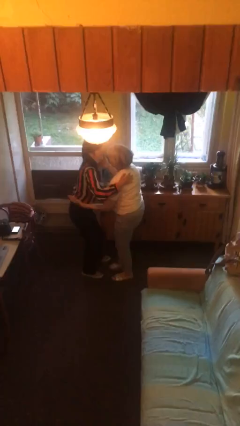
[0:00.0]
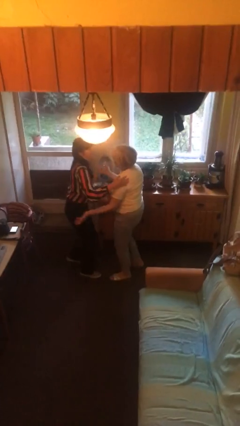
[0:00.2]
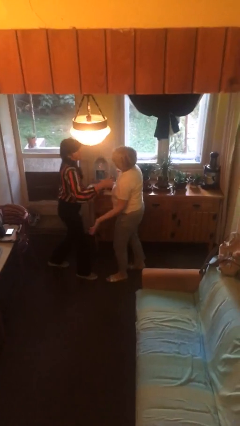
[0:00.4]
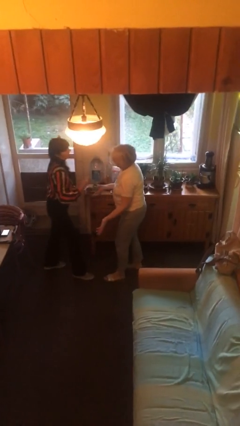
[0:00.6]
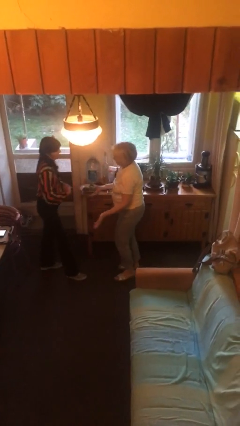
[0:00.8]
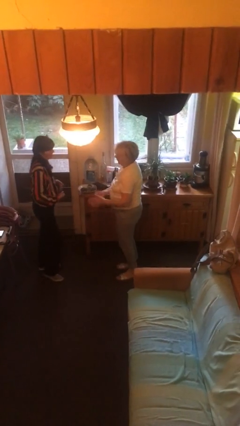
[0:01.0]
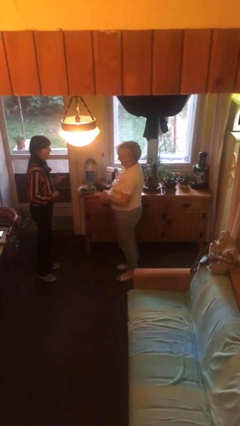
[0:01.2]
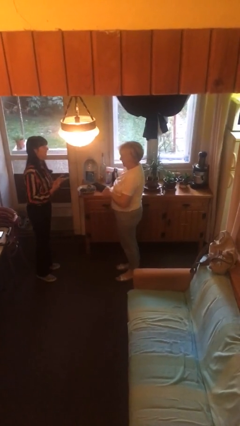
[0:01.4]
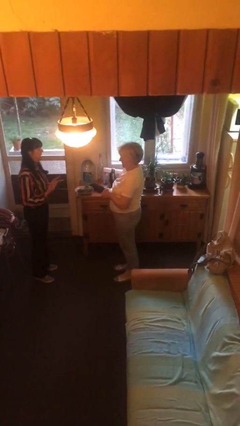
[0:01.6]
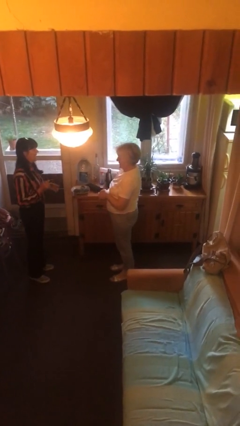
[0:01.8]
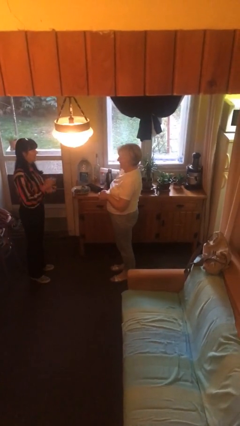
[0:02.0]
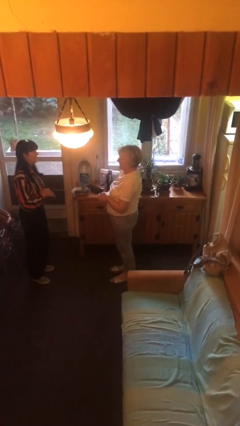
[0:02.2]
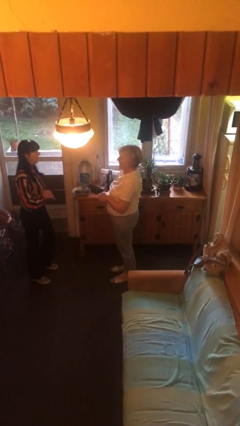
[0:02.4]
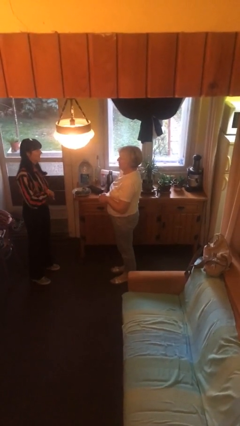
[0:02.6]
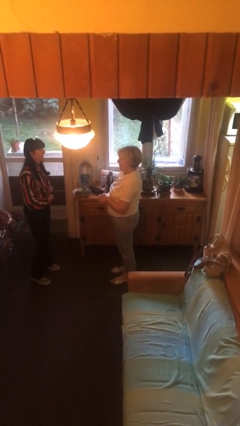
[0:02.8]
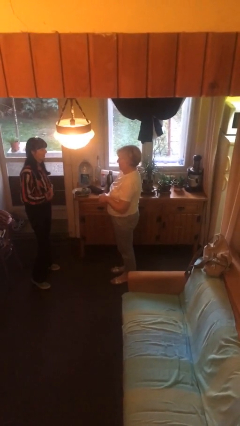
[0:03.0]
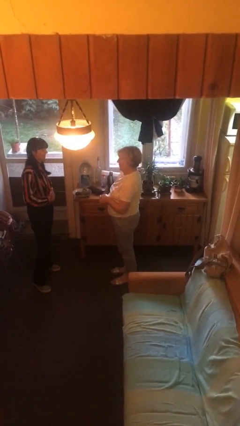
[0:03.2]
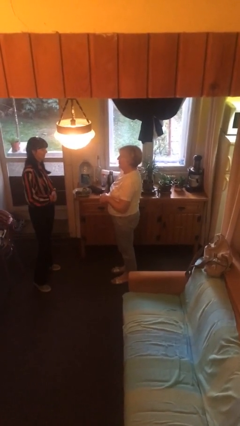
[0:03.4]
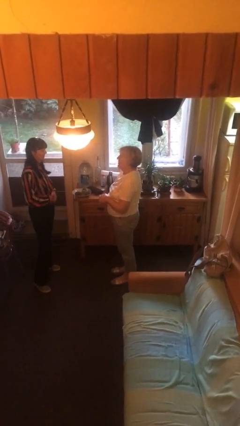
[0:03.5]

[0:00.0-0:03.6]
person talks to person

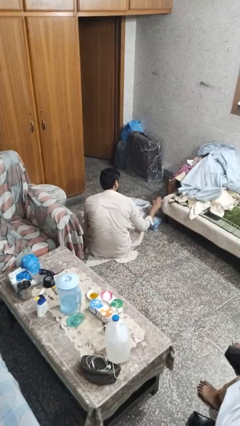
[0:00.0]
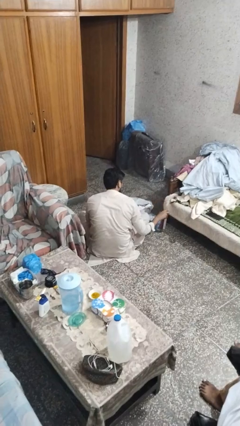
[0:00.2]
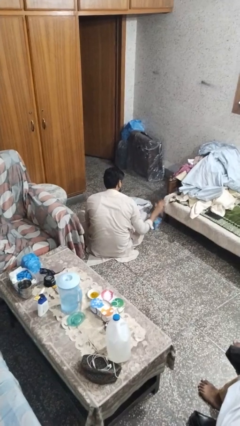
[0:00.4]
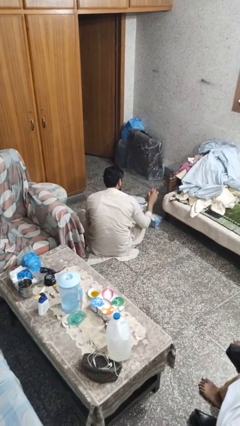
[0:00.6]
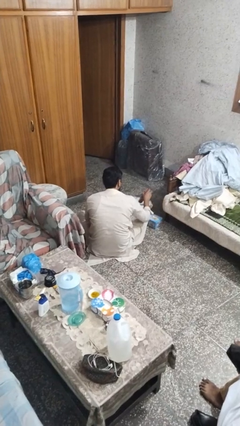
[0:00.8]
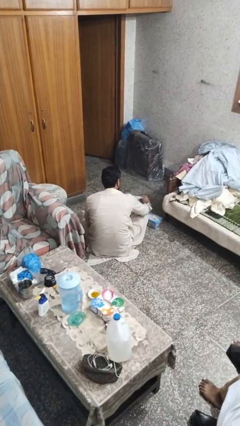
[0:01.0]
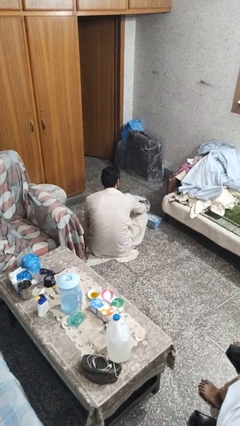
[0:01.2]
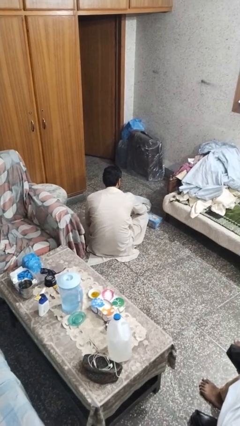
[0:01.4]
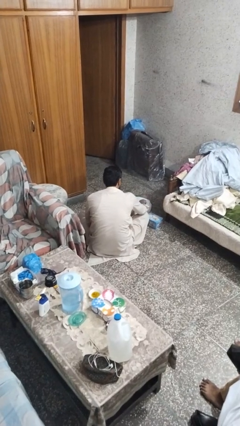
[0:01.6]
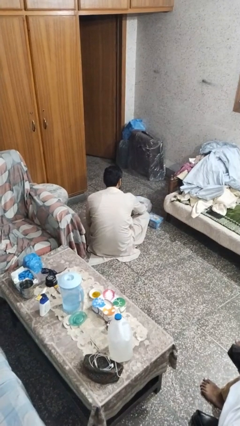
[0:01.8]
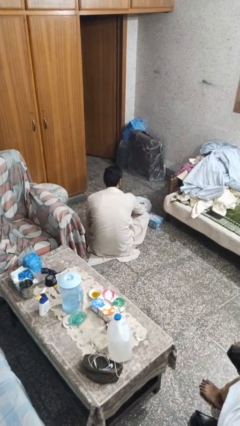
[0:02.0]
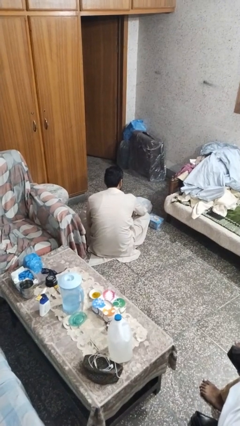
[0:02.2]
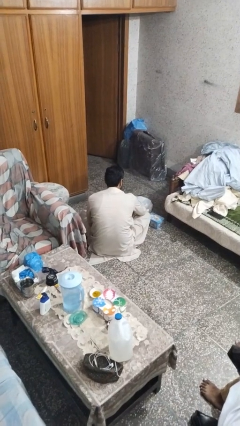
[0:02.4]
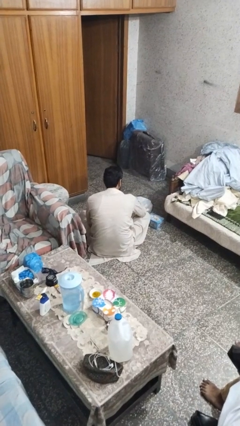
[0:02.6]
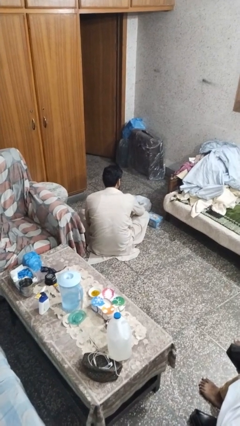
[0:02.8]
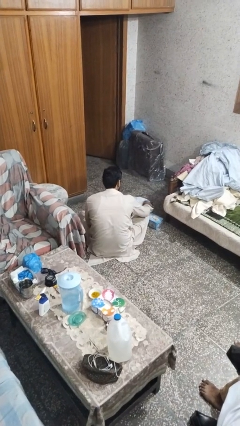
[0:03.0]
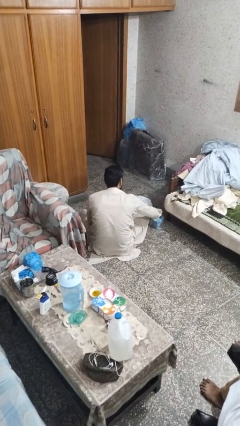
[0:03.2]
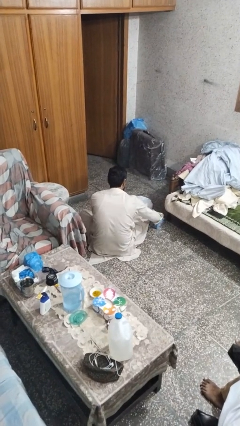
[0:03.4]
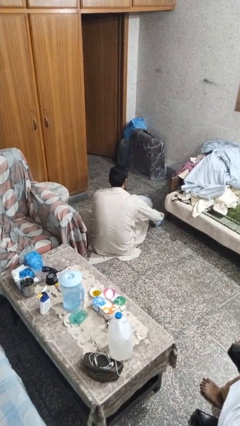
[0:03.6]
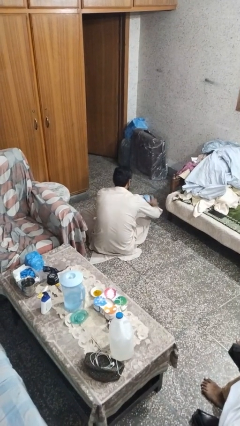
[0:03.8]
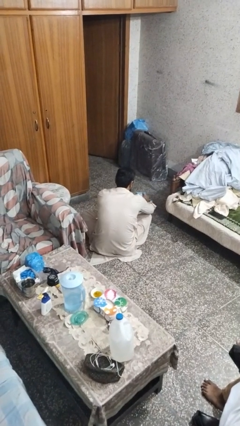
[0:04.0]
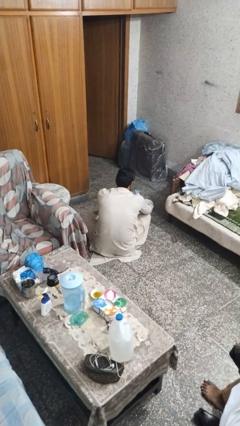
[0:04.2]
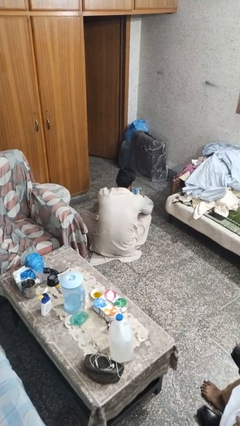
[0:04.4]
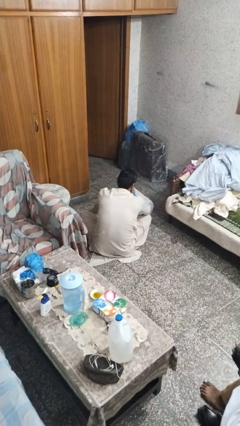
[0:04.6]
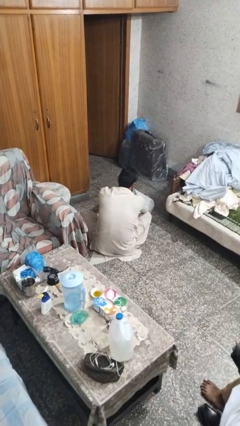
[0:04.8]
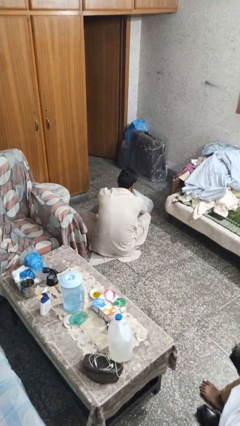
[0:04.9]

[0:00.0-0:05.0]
person puts object into bag

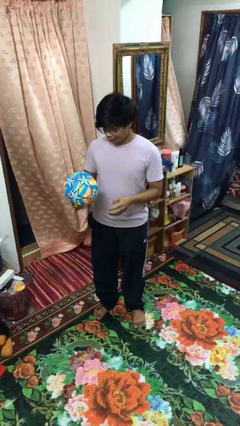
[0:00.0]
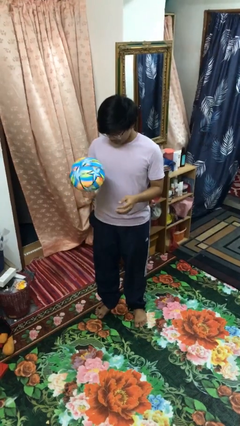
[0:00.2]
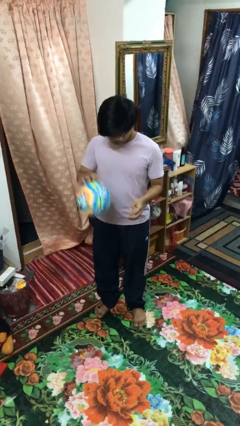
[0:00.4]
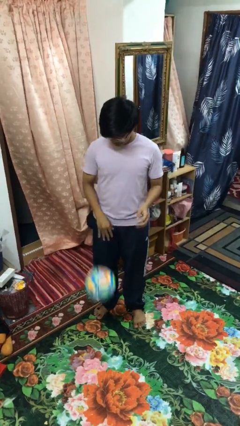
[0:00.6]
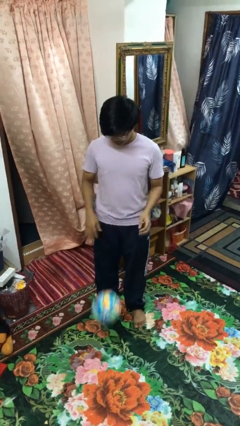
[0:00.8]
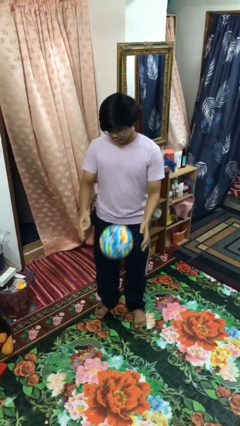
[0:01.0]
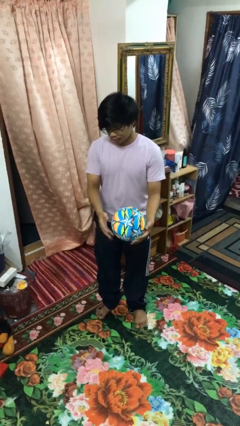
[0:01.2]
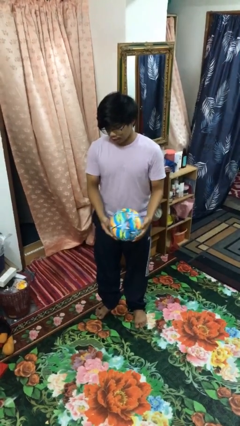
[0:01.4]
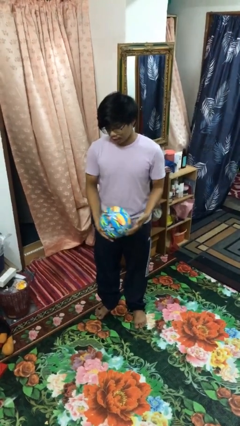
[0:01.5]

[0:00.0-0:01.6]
person bounces ball on floor

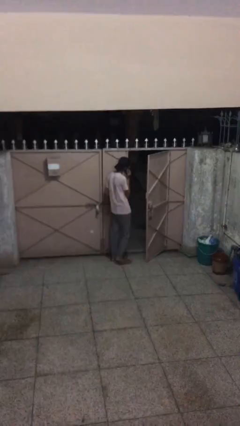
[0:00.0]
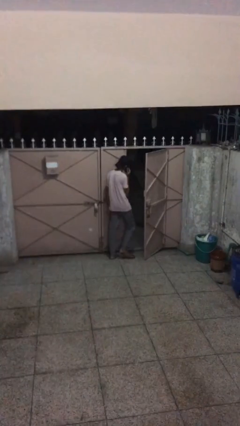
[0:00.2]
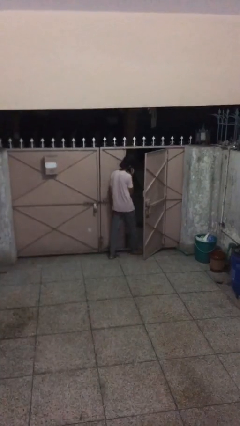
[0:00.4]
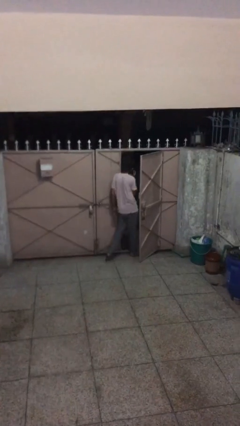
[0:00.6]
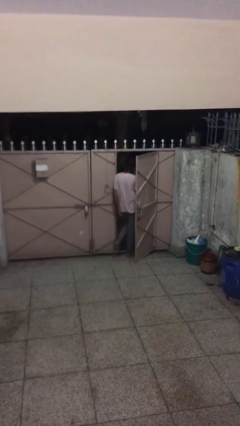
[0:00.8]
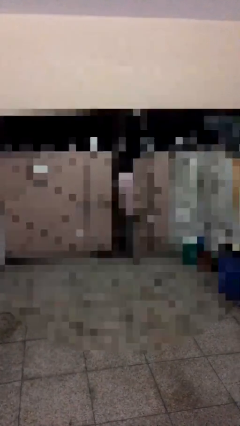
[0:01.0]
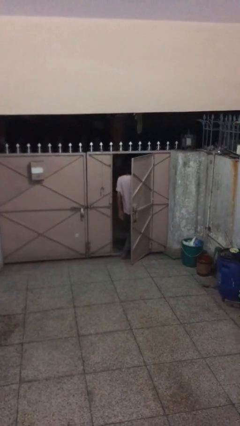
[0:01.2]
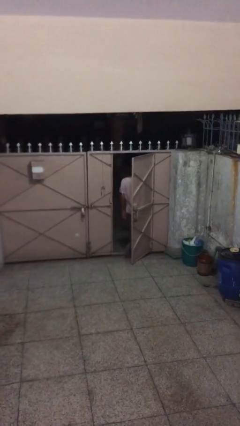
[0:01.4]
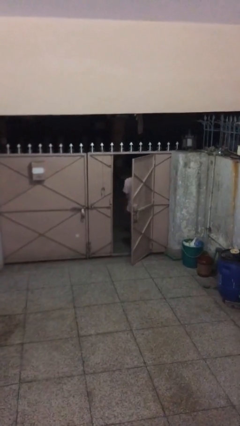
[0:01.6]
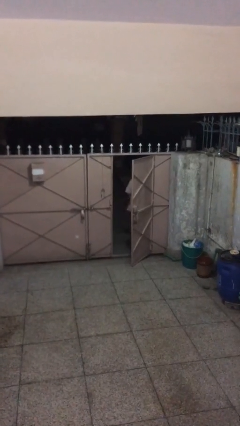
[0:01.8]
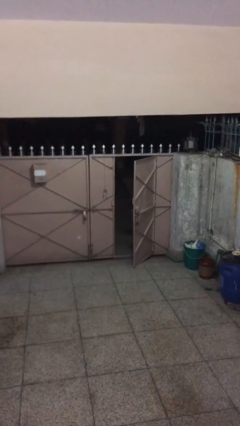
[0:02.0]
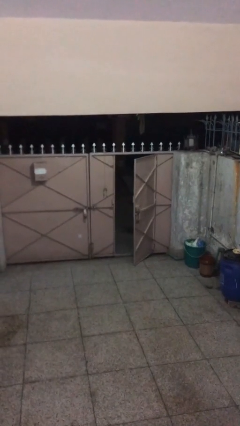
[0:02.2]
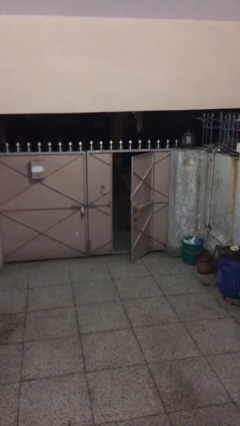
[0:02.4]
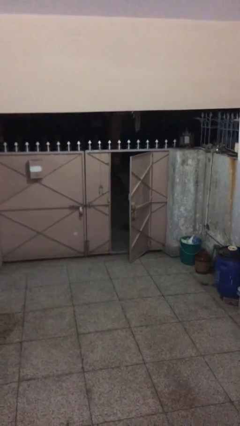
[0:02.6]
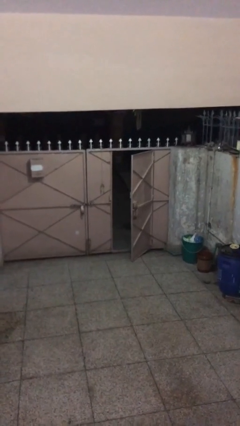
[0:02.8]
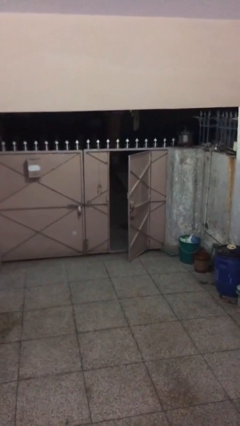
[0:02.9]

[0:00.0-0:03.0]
person exits scene through structure

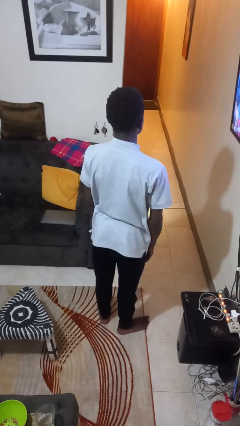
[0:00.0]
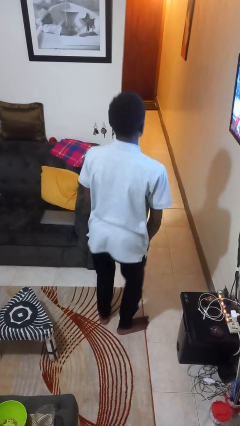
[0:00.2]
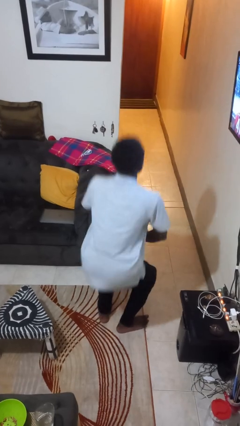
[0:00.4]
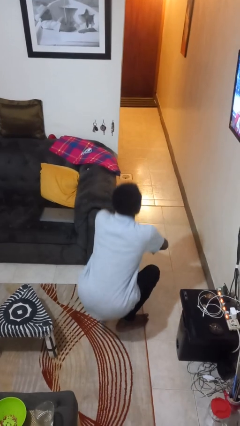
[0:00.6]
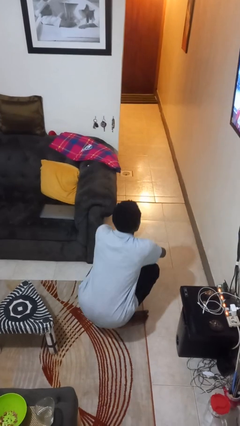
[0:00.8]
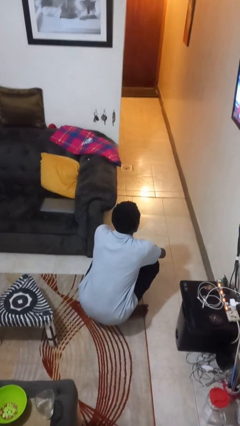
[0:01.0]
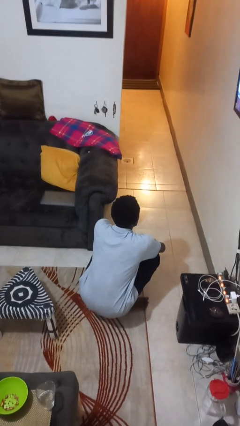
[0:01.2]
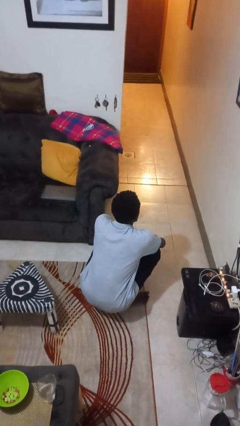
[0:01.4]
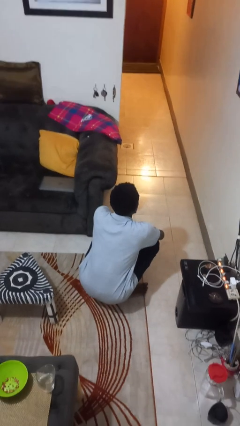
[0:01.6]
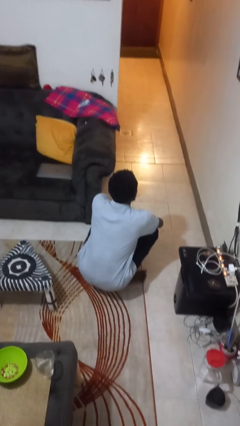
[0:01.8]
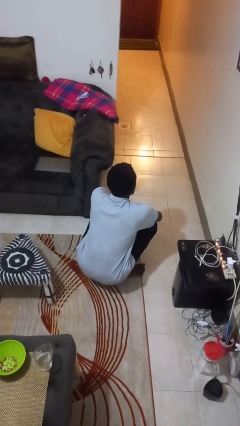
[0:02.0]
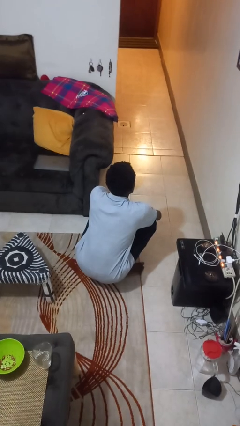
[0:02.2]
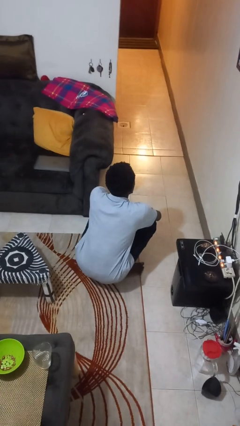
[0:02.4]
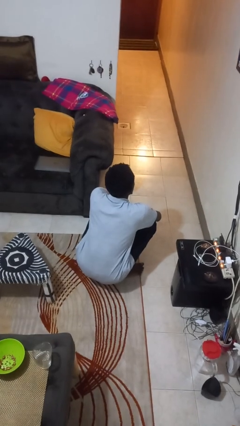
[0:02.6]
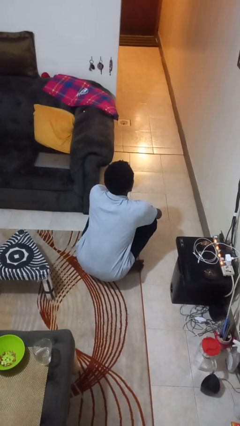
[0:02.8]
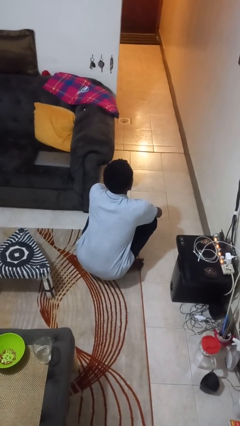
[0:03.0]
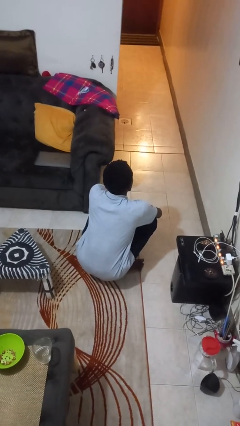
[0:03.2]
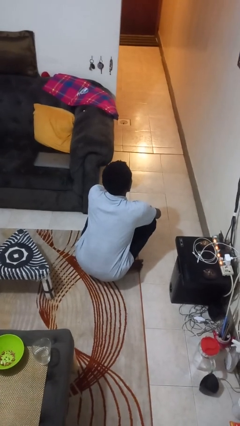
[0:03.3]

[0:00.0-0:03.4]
person squats

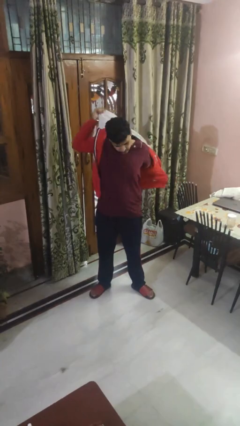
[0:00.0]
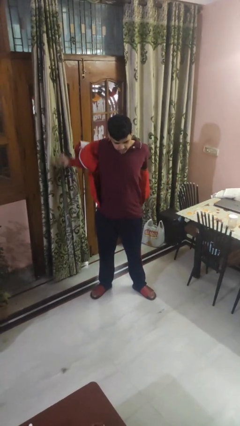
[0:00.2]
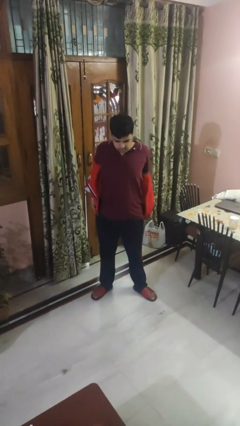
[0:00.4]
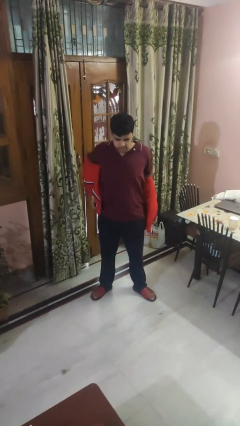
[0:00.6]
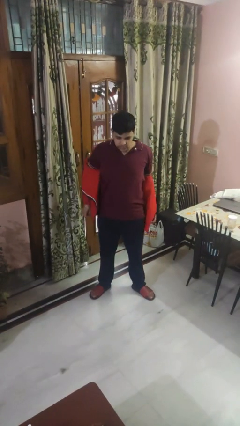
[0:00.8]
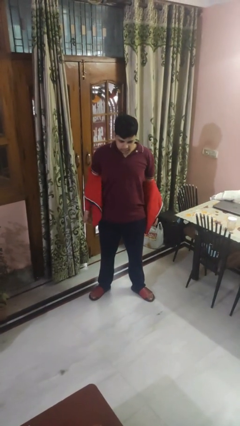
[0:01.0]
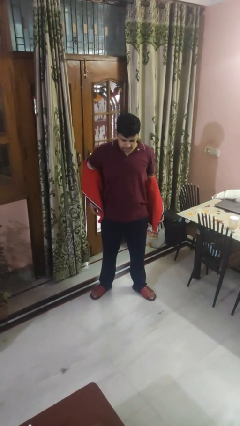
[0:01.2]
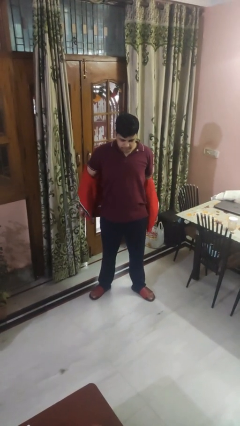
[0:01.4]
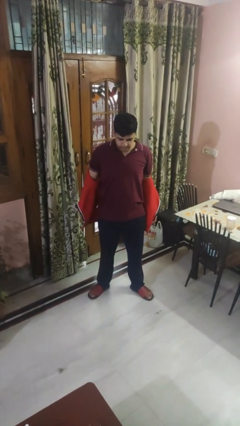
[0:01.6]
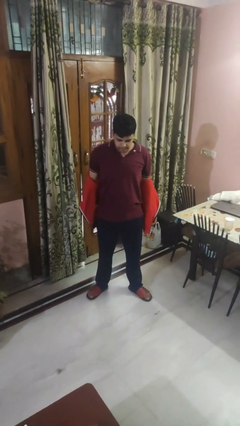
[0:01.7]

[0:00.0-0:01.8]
person takes off hoodie
